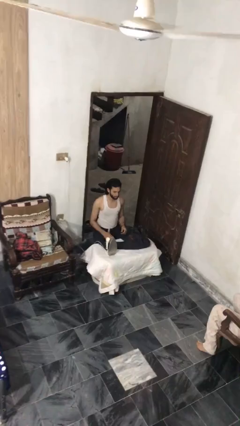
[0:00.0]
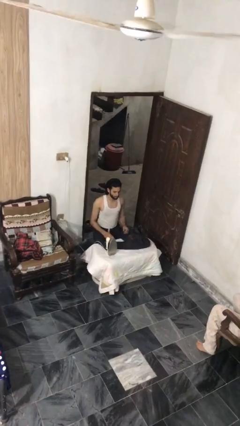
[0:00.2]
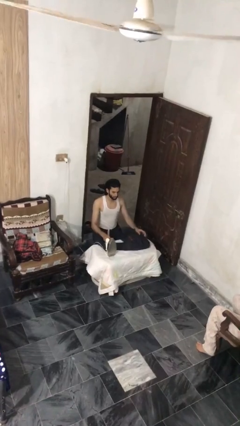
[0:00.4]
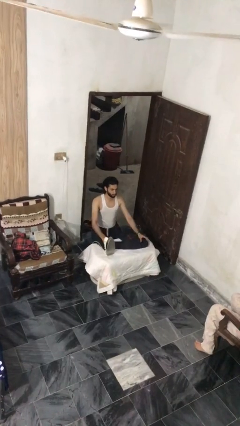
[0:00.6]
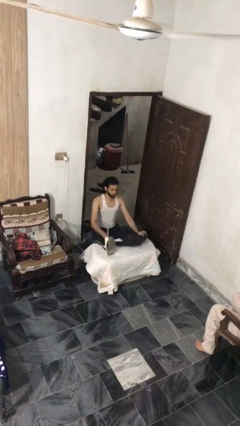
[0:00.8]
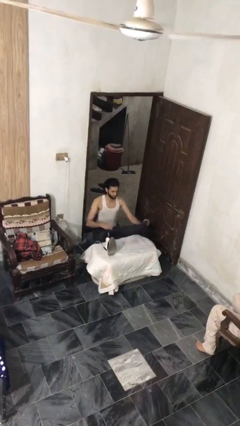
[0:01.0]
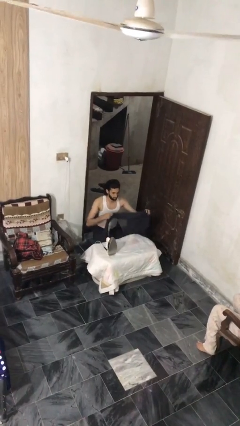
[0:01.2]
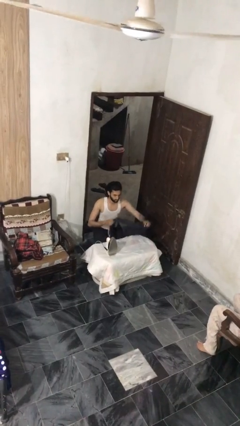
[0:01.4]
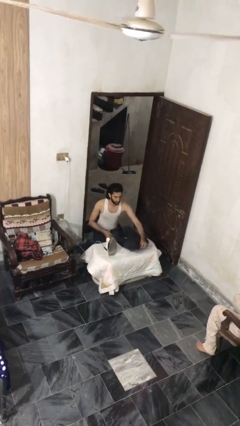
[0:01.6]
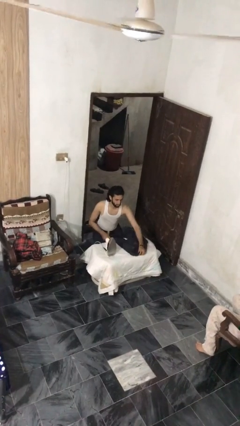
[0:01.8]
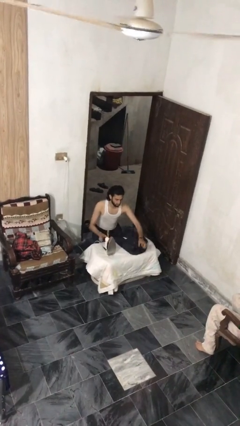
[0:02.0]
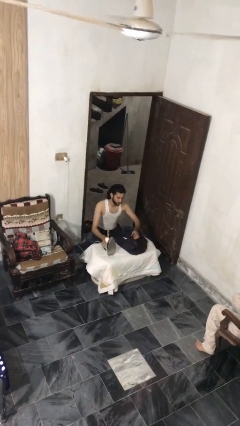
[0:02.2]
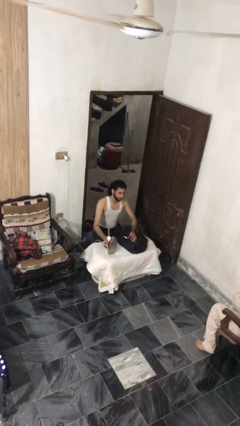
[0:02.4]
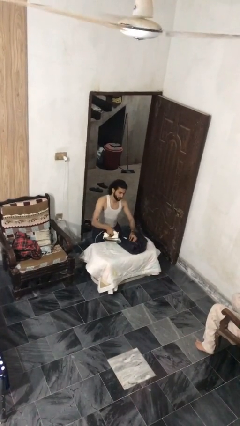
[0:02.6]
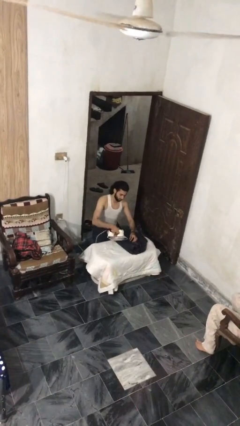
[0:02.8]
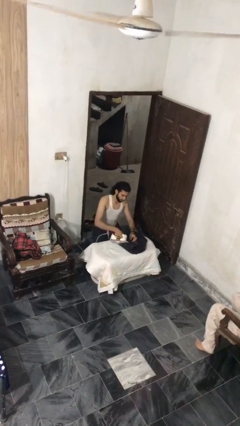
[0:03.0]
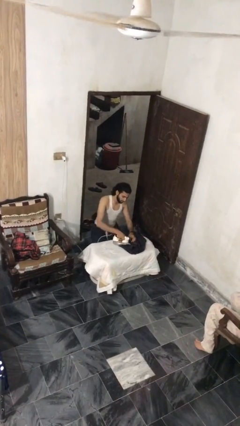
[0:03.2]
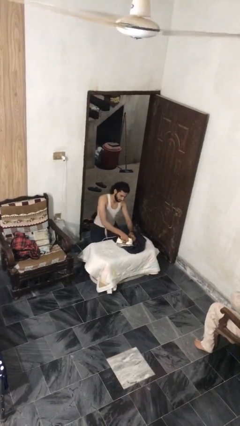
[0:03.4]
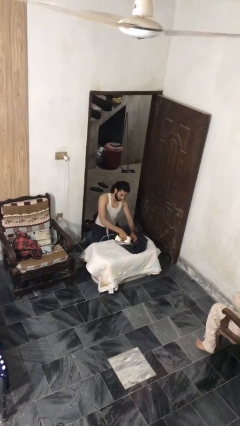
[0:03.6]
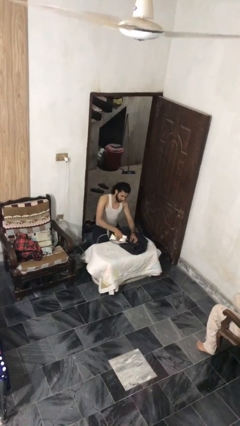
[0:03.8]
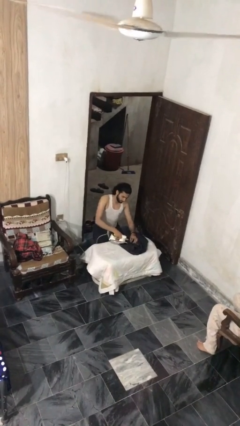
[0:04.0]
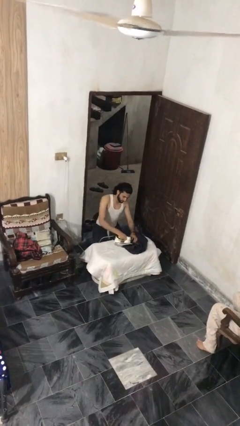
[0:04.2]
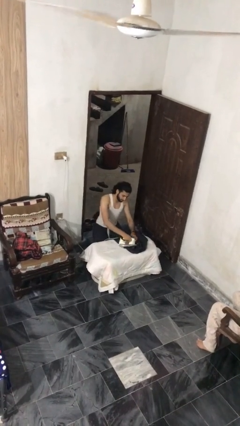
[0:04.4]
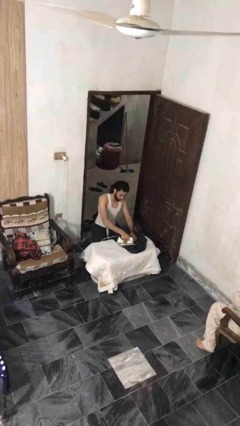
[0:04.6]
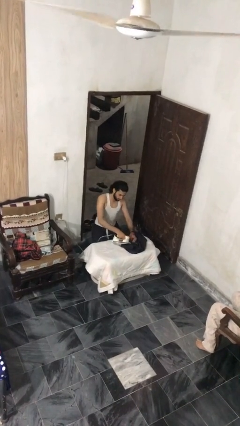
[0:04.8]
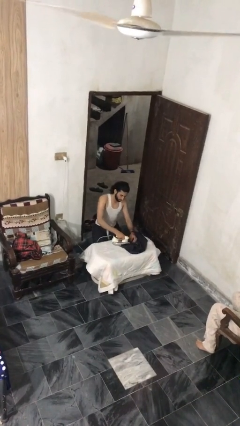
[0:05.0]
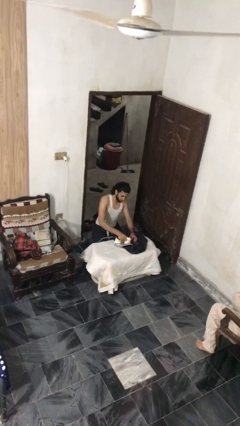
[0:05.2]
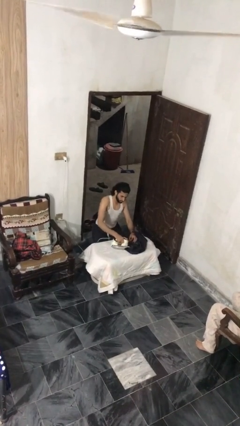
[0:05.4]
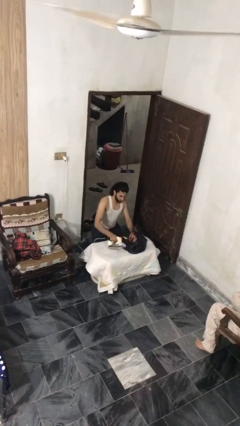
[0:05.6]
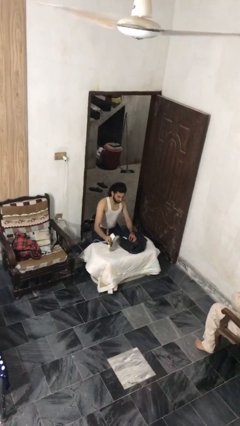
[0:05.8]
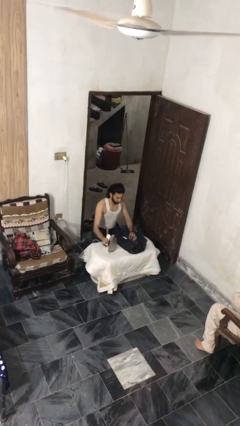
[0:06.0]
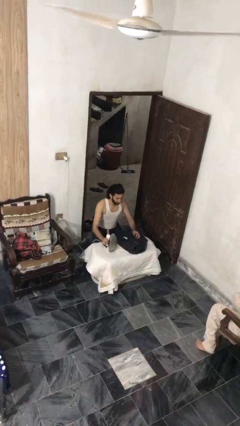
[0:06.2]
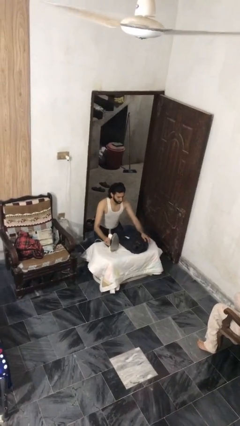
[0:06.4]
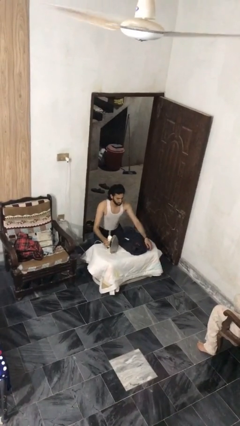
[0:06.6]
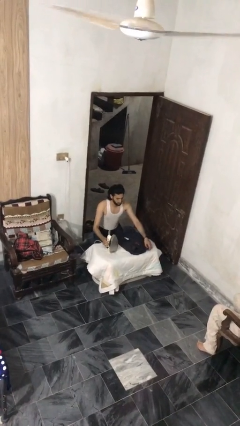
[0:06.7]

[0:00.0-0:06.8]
person irons clothes

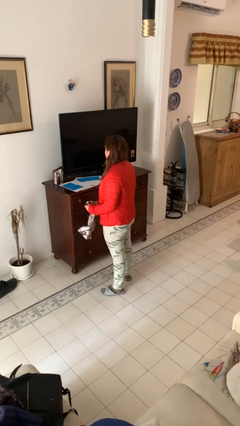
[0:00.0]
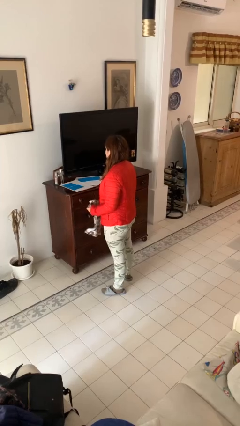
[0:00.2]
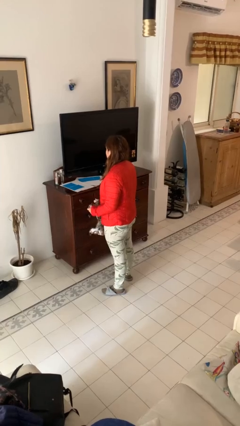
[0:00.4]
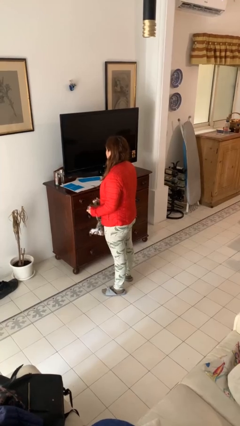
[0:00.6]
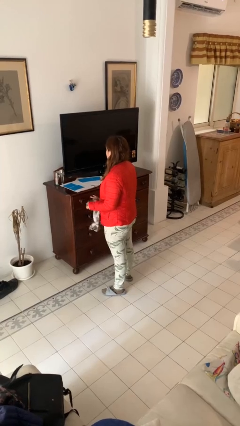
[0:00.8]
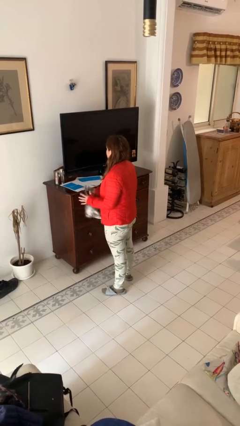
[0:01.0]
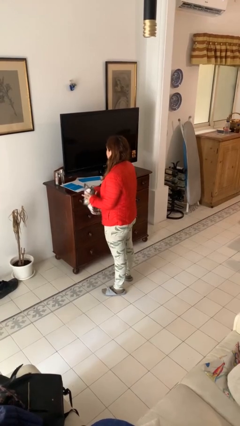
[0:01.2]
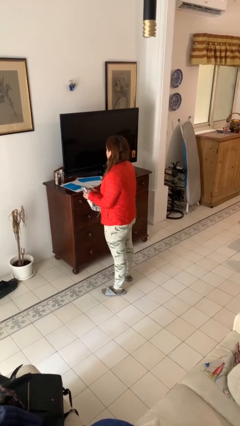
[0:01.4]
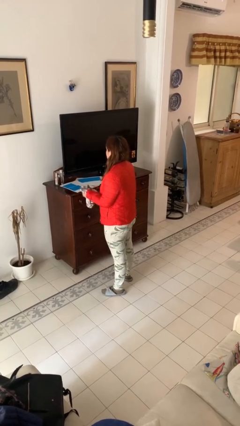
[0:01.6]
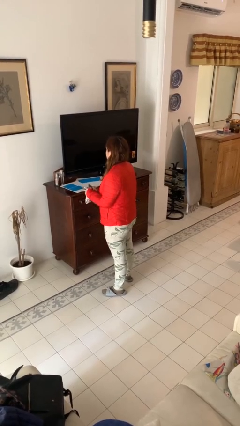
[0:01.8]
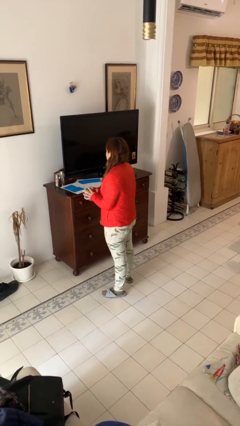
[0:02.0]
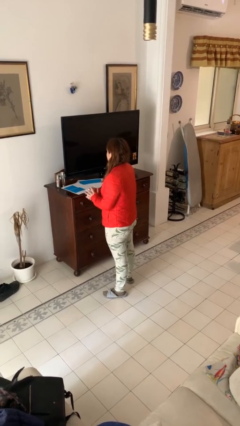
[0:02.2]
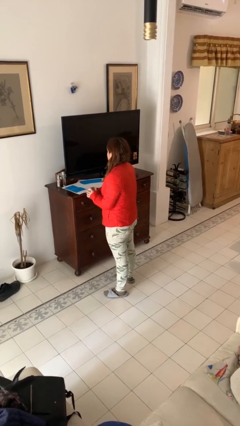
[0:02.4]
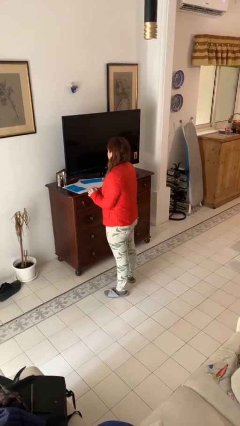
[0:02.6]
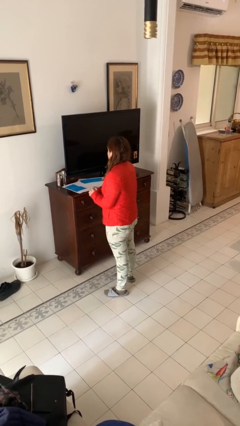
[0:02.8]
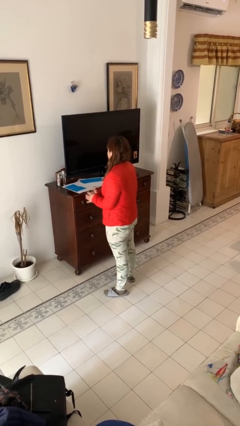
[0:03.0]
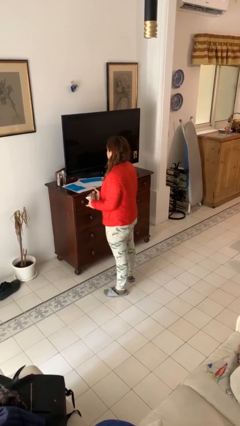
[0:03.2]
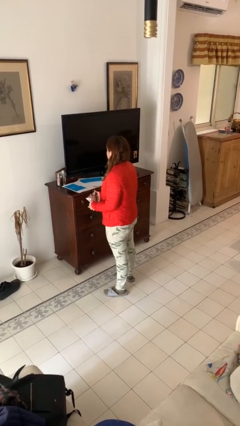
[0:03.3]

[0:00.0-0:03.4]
person crumples paper

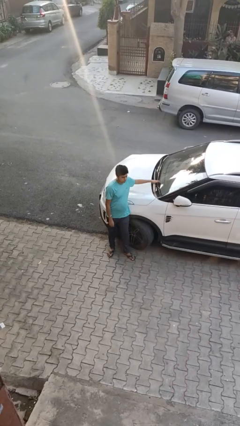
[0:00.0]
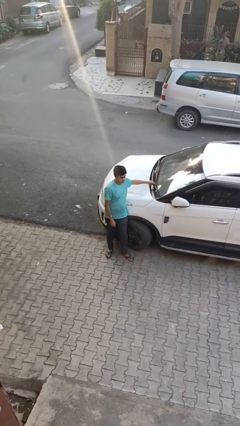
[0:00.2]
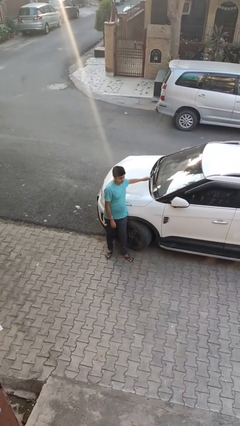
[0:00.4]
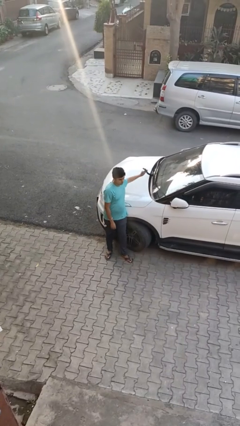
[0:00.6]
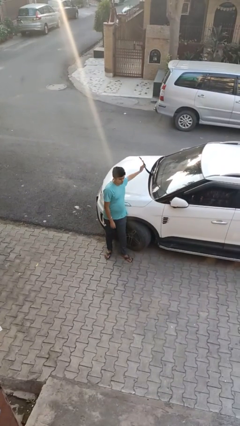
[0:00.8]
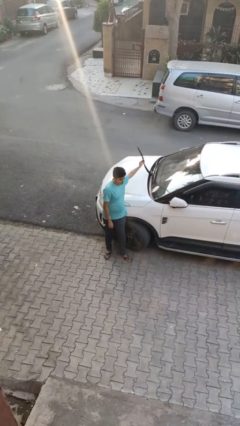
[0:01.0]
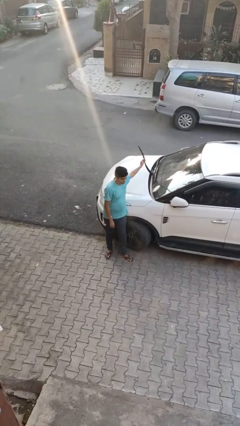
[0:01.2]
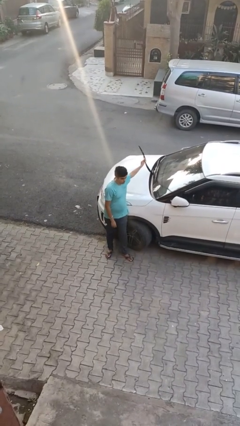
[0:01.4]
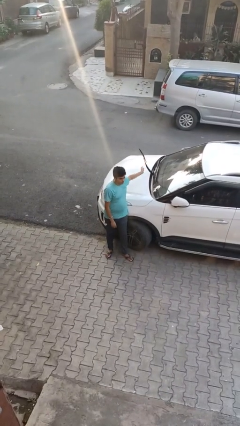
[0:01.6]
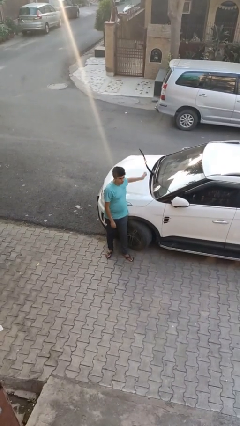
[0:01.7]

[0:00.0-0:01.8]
person flips up car wipers

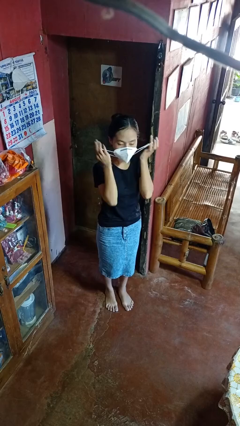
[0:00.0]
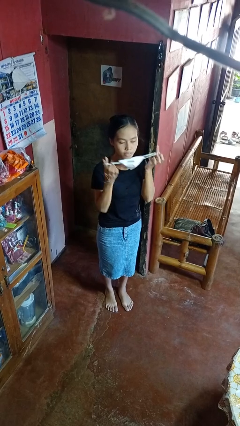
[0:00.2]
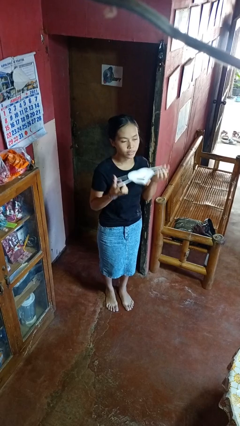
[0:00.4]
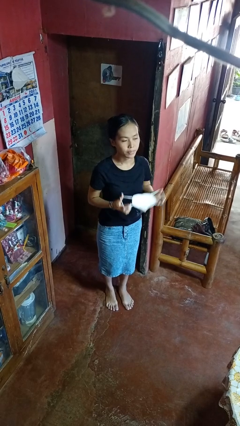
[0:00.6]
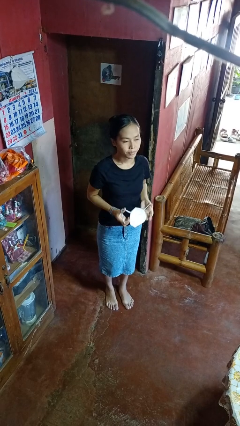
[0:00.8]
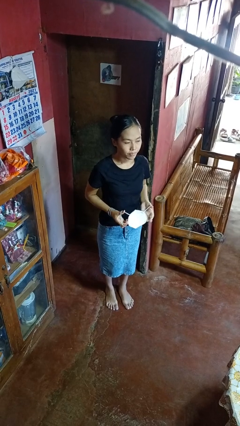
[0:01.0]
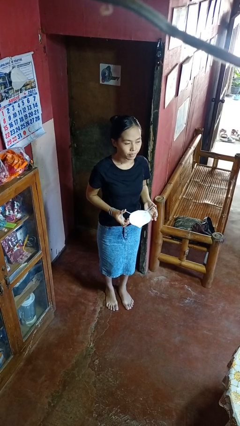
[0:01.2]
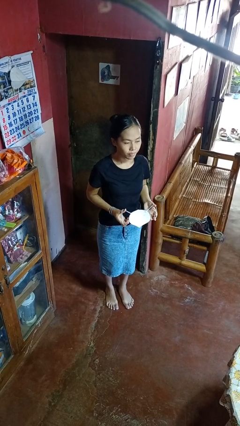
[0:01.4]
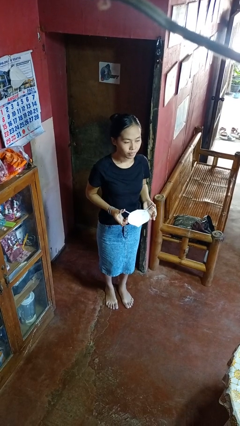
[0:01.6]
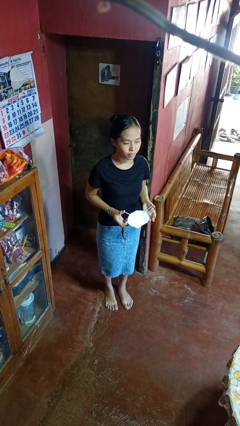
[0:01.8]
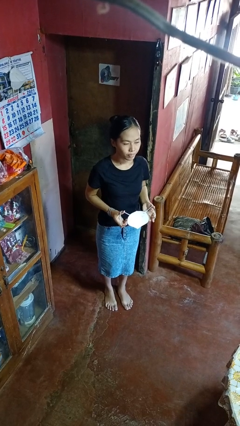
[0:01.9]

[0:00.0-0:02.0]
person takes off facemask

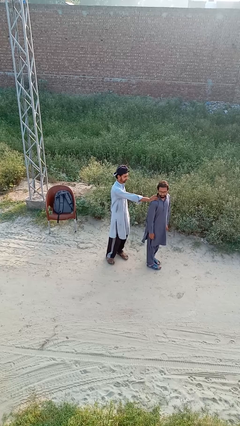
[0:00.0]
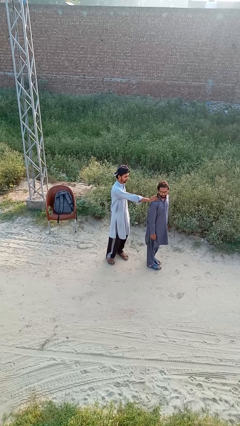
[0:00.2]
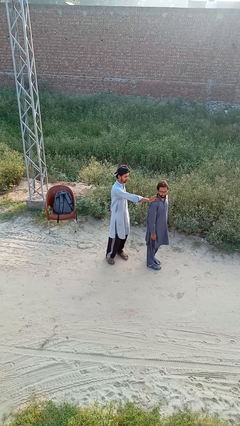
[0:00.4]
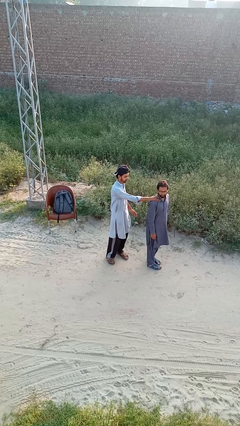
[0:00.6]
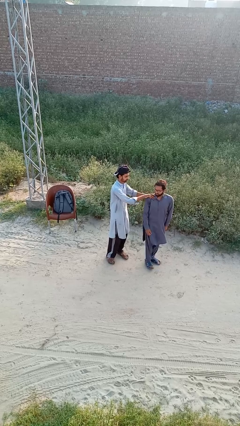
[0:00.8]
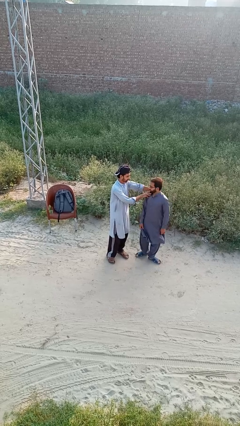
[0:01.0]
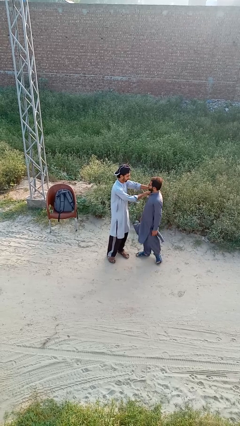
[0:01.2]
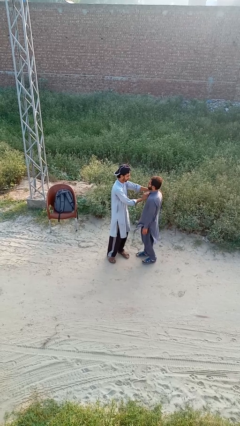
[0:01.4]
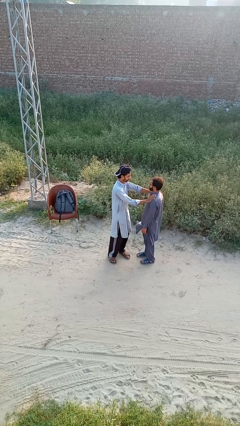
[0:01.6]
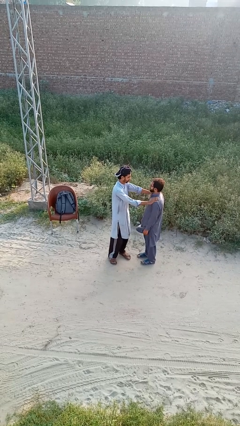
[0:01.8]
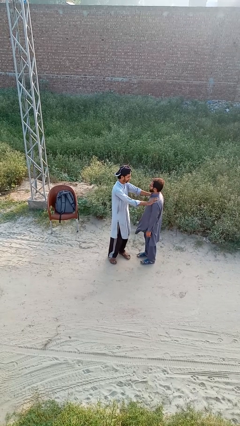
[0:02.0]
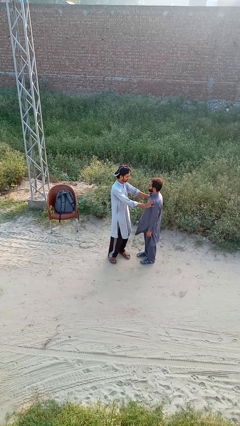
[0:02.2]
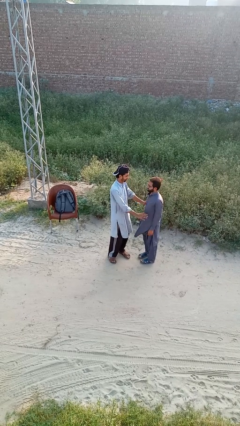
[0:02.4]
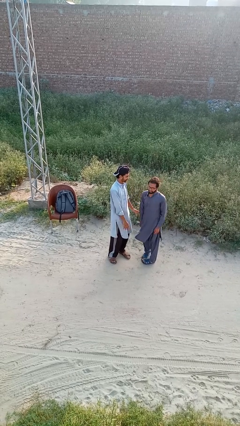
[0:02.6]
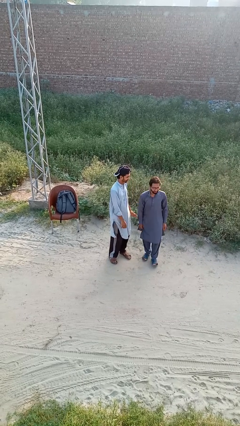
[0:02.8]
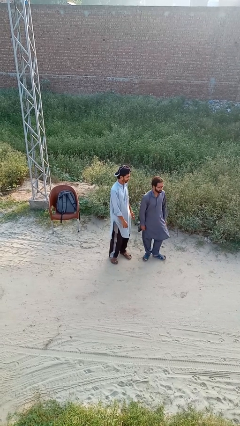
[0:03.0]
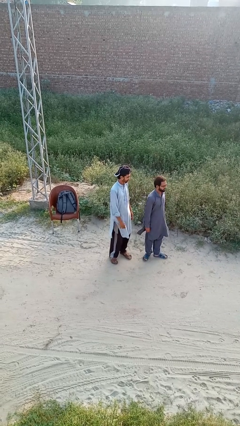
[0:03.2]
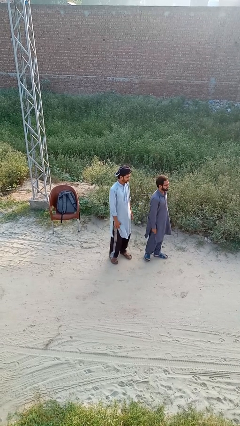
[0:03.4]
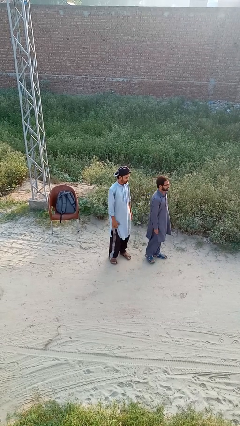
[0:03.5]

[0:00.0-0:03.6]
person spins person around
